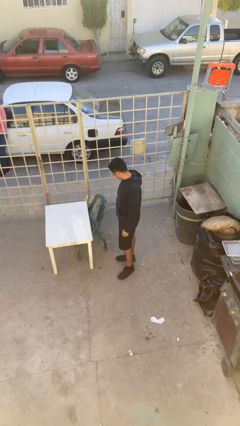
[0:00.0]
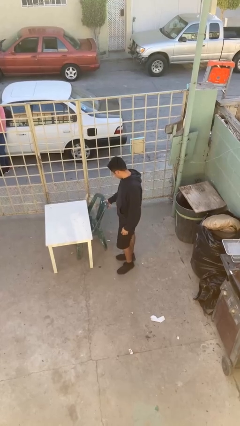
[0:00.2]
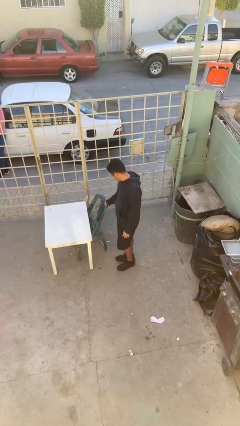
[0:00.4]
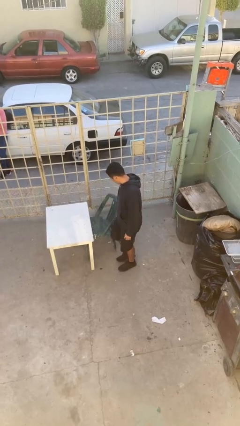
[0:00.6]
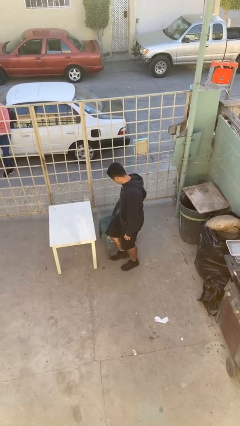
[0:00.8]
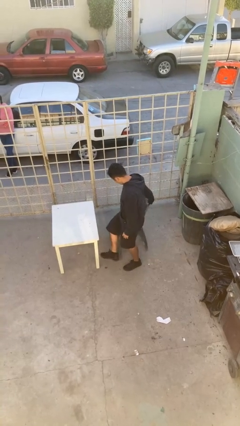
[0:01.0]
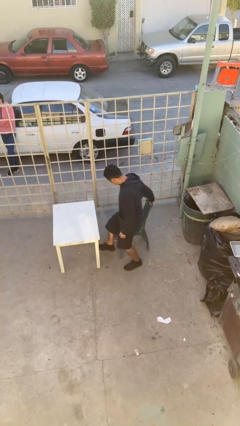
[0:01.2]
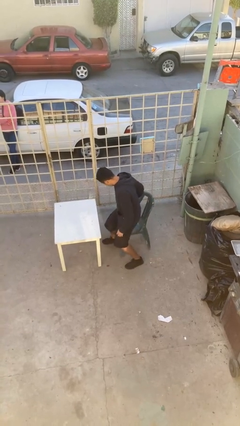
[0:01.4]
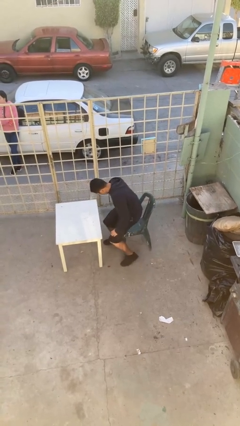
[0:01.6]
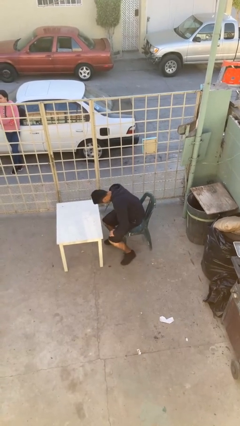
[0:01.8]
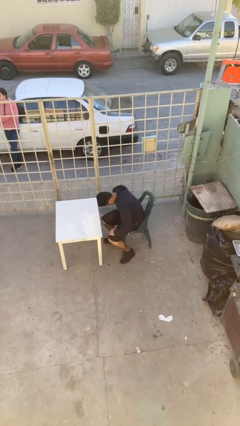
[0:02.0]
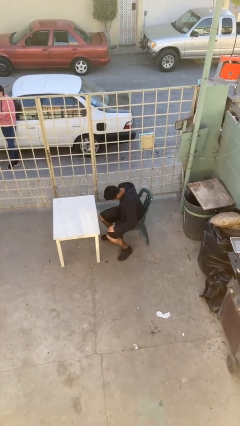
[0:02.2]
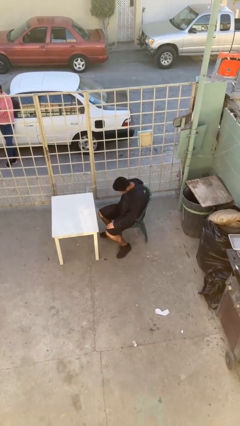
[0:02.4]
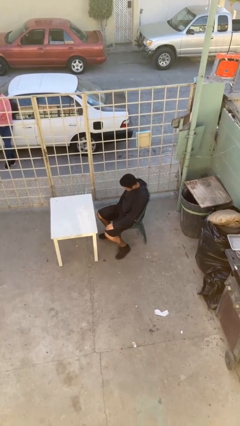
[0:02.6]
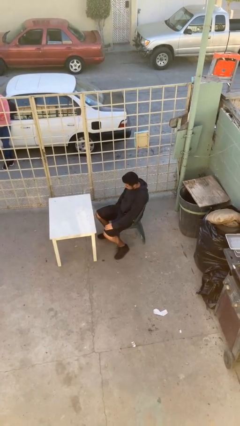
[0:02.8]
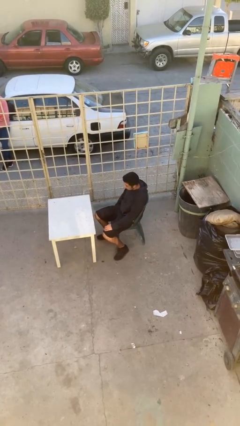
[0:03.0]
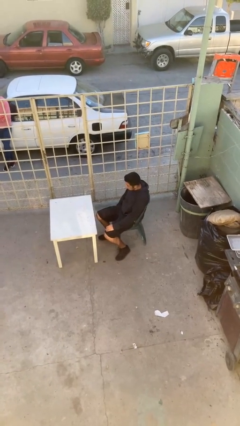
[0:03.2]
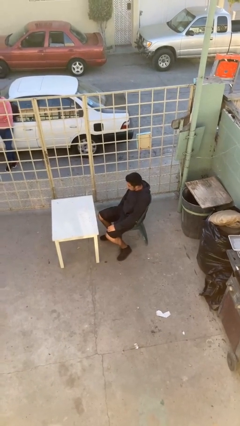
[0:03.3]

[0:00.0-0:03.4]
person sits down

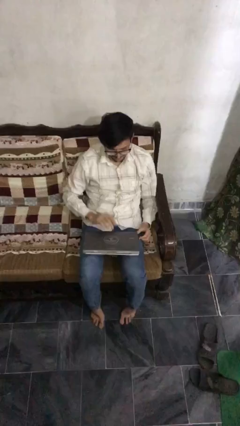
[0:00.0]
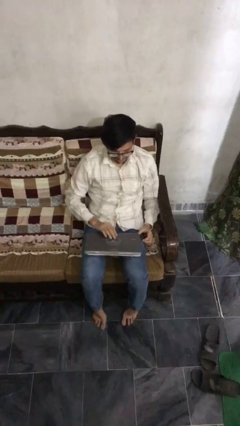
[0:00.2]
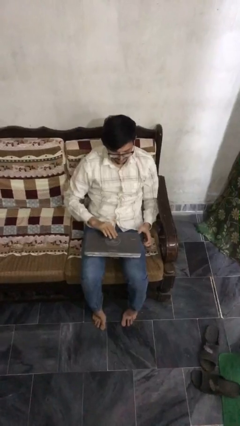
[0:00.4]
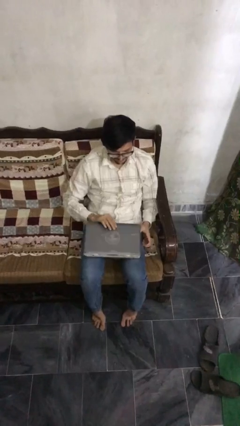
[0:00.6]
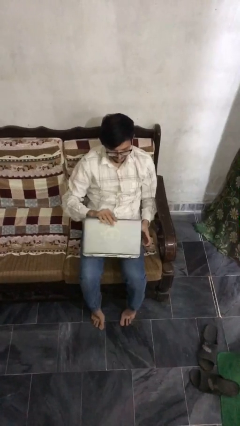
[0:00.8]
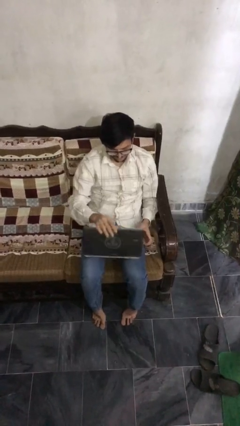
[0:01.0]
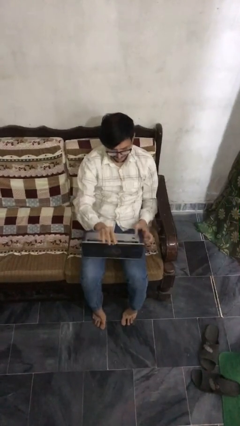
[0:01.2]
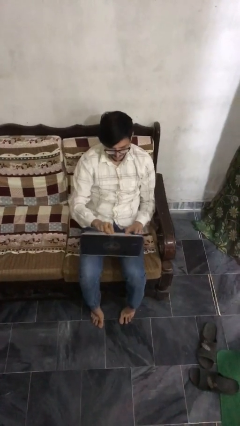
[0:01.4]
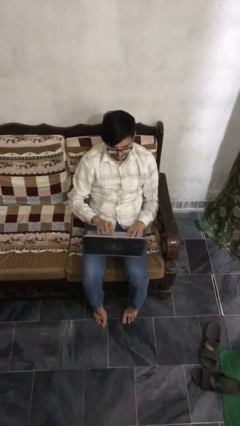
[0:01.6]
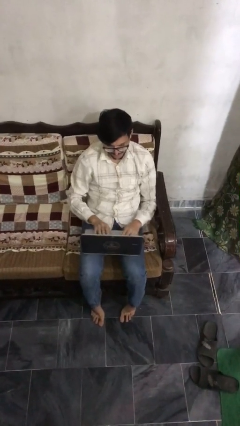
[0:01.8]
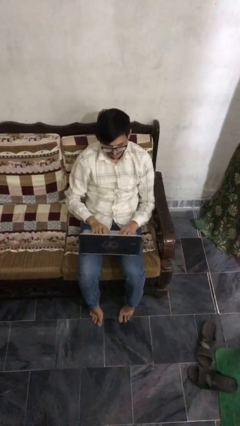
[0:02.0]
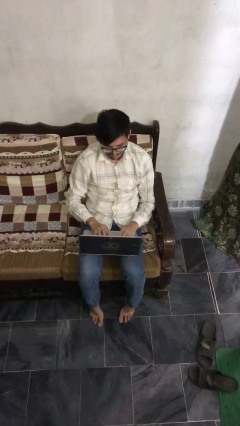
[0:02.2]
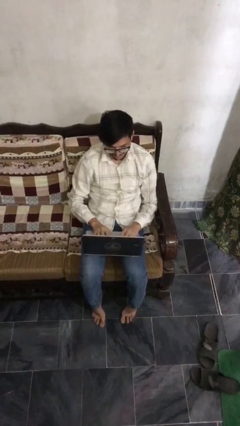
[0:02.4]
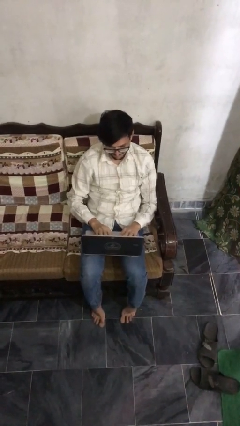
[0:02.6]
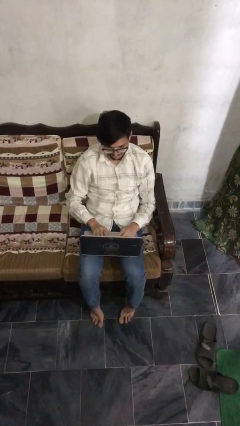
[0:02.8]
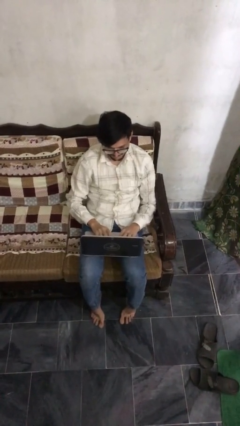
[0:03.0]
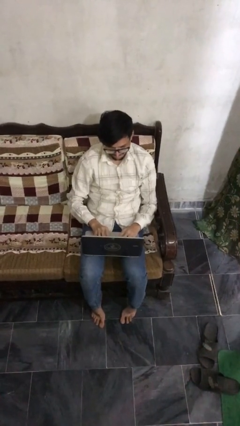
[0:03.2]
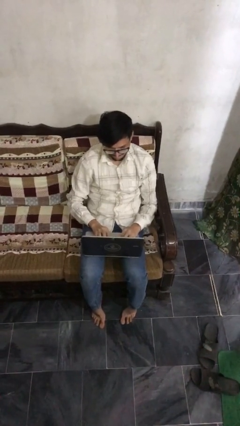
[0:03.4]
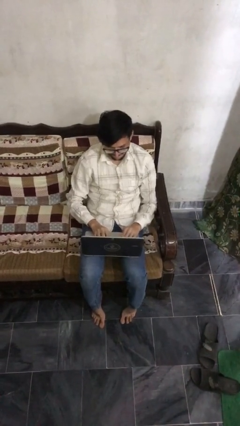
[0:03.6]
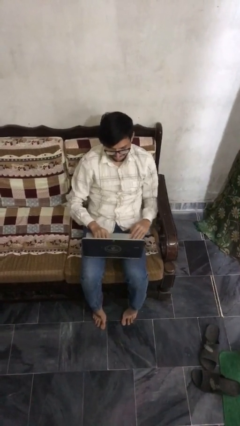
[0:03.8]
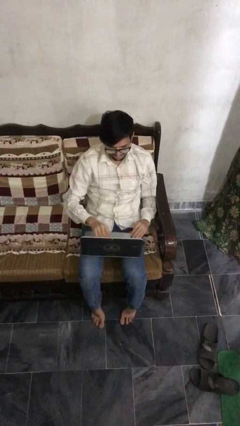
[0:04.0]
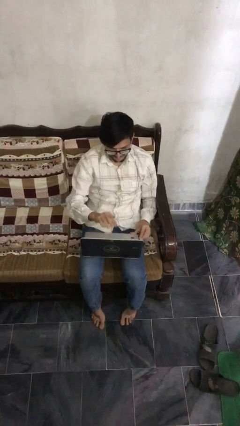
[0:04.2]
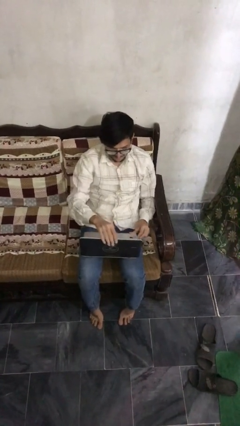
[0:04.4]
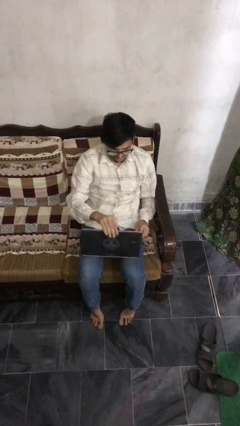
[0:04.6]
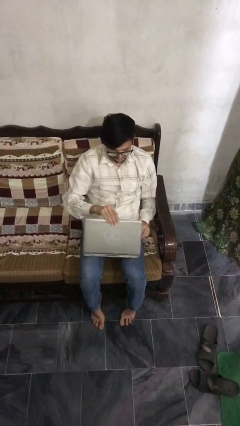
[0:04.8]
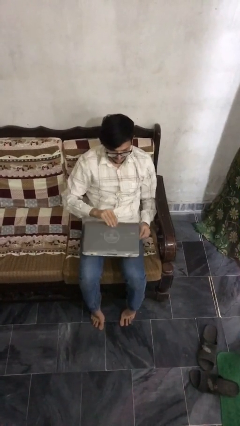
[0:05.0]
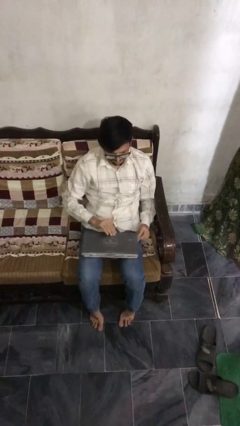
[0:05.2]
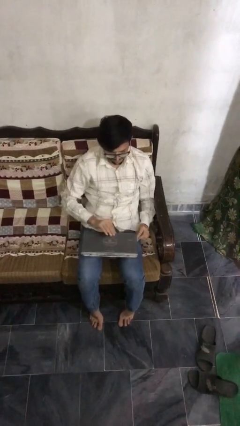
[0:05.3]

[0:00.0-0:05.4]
person interacts with laptop

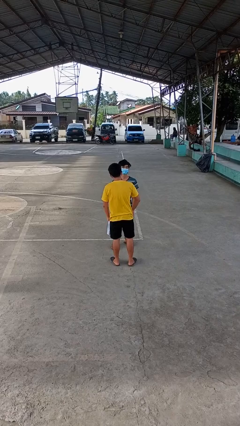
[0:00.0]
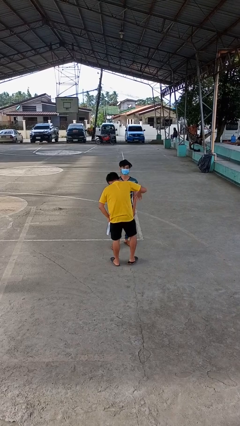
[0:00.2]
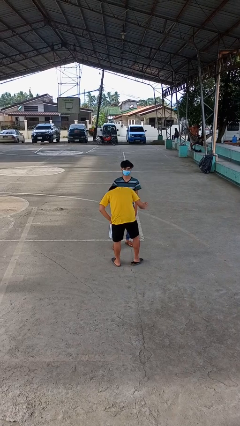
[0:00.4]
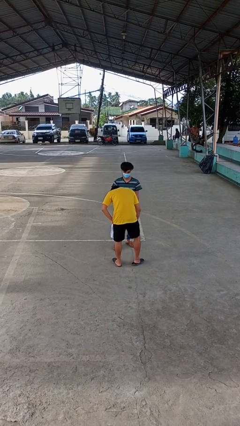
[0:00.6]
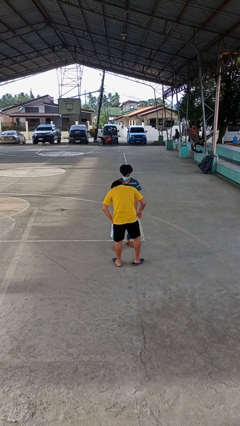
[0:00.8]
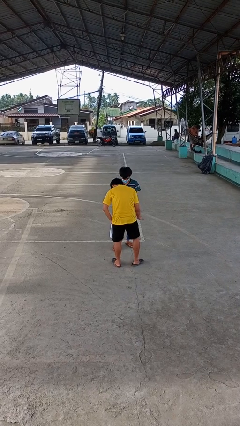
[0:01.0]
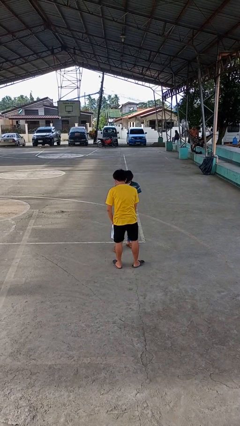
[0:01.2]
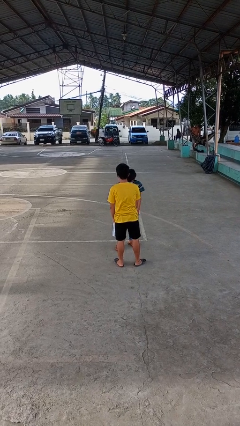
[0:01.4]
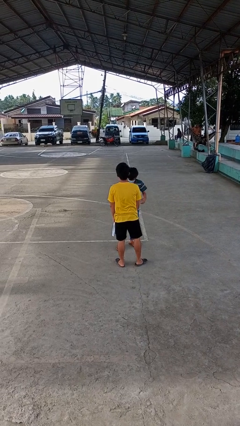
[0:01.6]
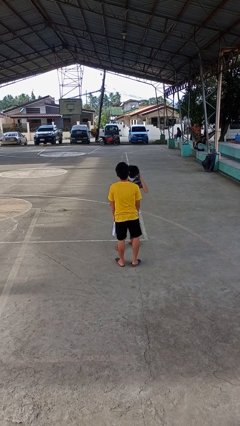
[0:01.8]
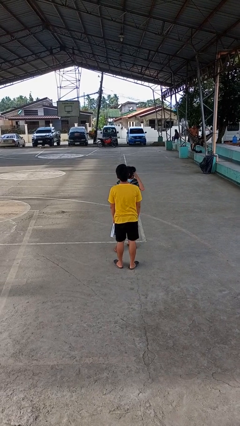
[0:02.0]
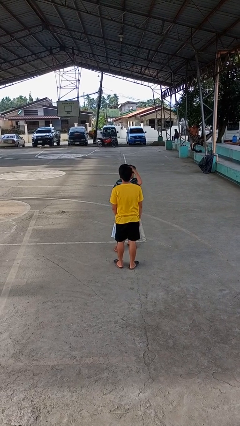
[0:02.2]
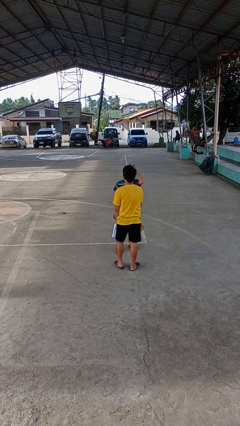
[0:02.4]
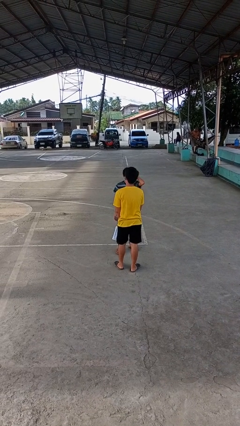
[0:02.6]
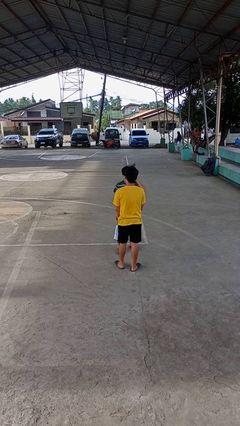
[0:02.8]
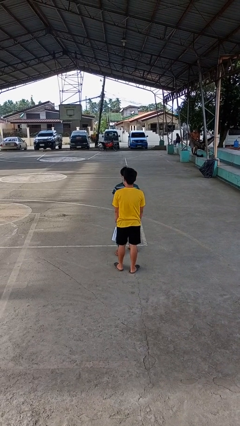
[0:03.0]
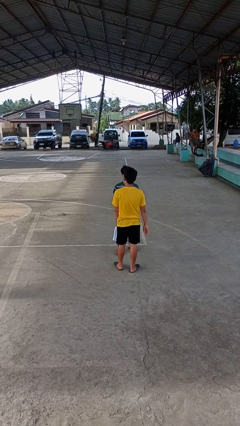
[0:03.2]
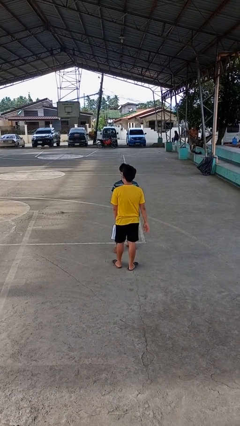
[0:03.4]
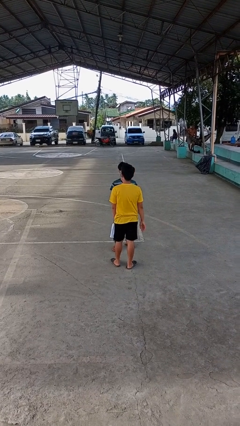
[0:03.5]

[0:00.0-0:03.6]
person laughs with person

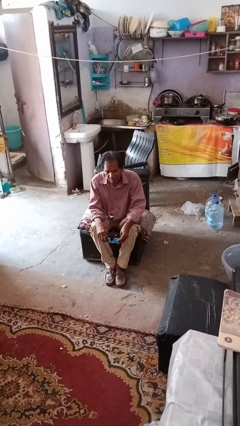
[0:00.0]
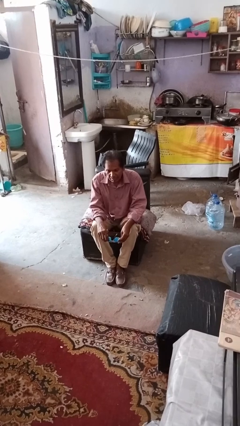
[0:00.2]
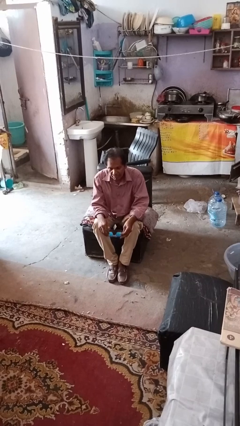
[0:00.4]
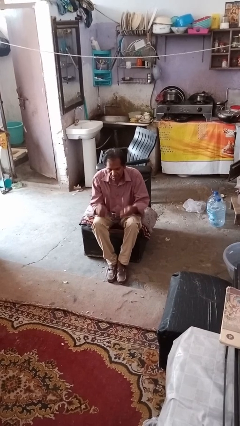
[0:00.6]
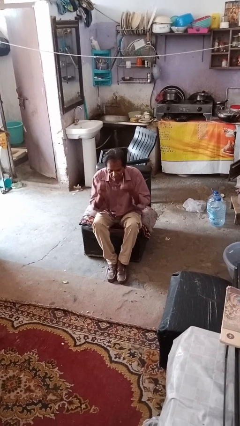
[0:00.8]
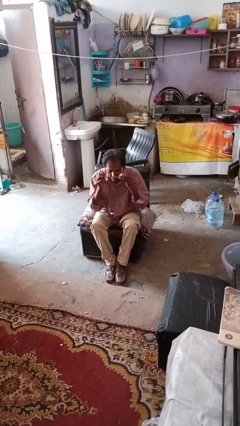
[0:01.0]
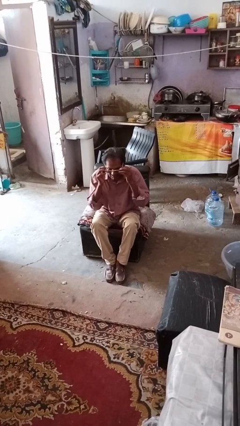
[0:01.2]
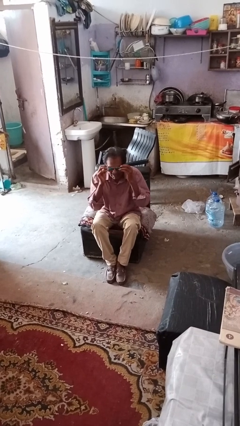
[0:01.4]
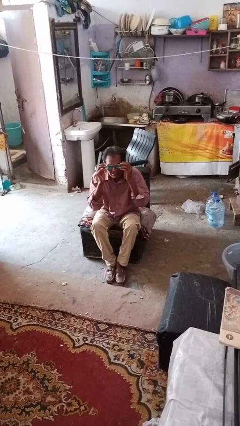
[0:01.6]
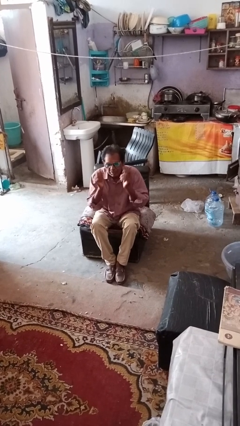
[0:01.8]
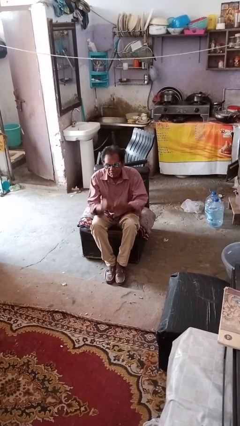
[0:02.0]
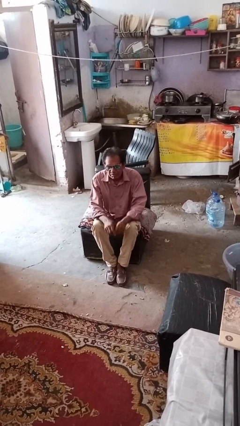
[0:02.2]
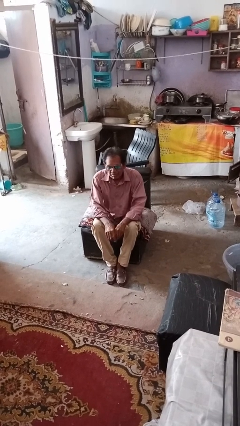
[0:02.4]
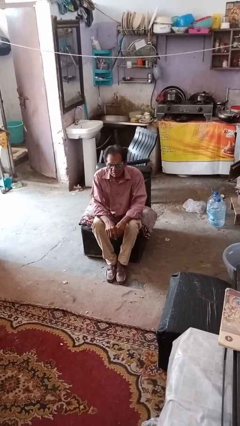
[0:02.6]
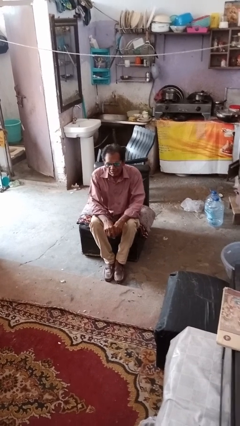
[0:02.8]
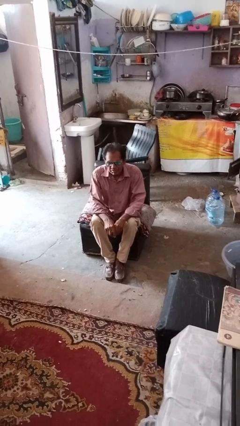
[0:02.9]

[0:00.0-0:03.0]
person puts on sunglasses

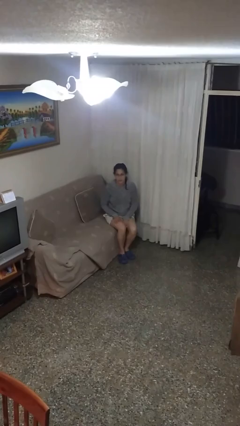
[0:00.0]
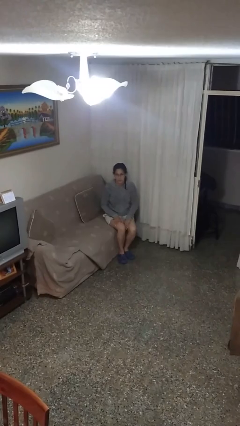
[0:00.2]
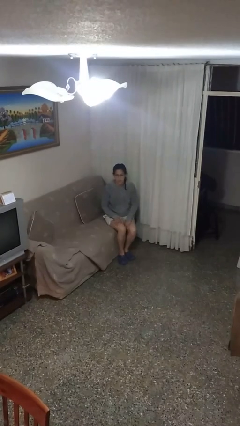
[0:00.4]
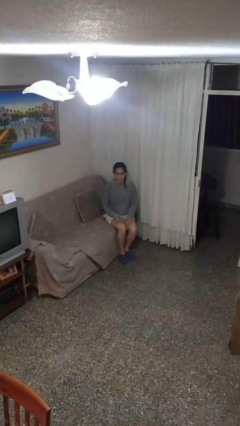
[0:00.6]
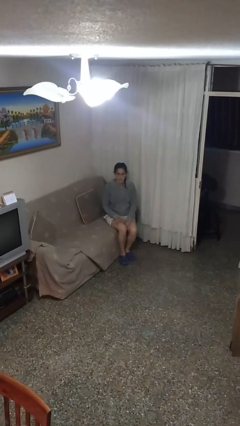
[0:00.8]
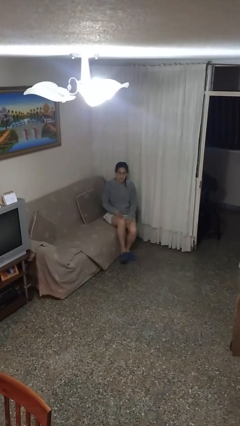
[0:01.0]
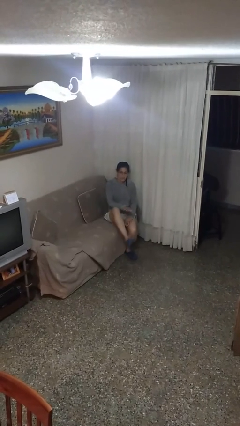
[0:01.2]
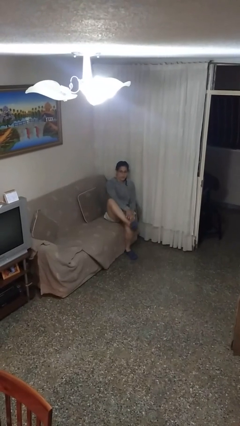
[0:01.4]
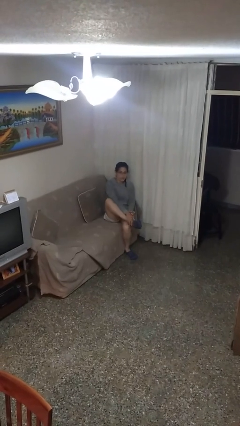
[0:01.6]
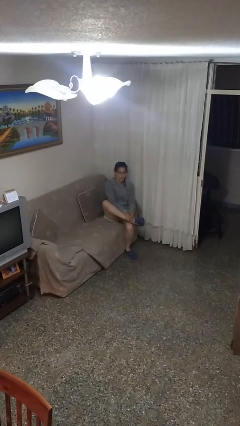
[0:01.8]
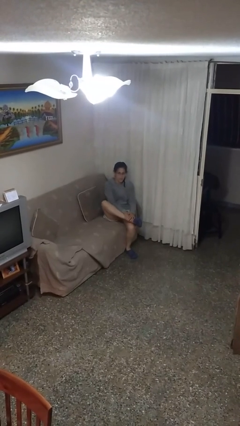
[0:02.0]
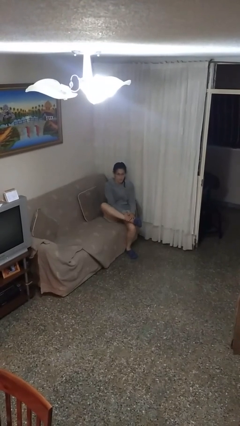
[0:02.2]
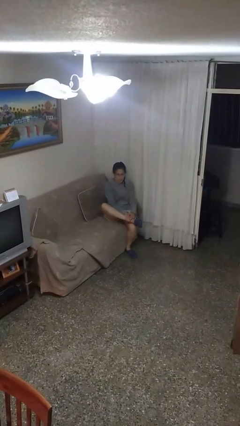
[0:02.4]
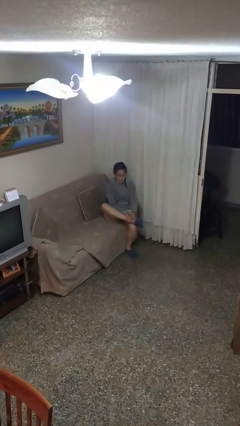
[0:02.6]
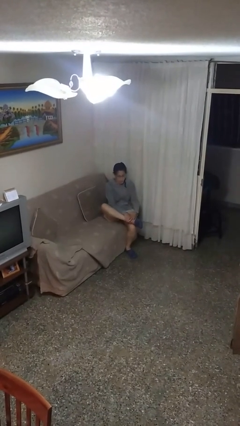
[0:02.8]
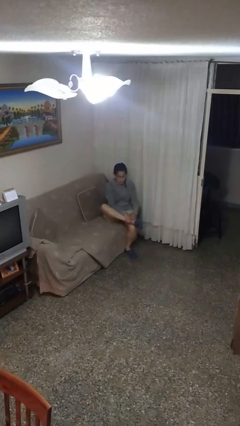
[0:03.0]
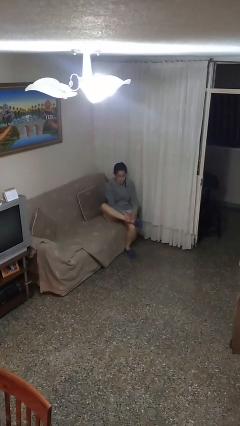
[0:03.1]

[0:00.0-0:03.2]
person crosses legs
